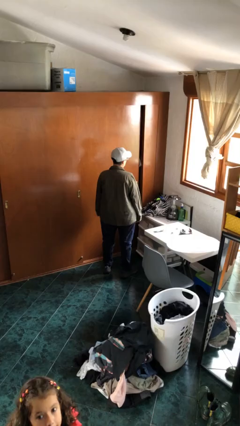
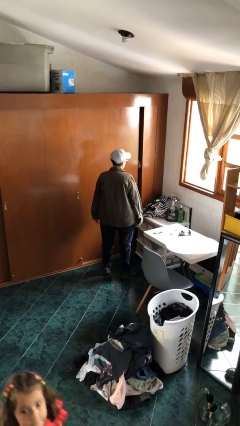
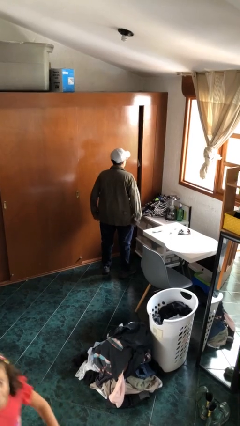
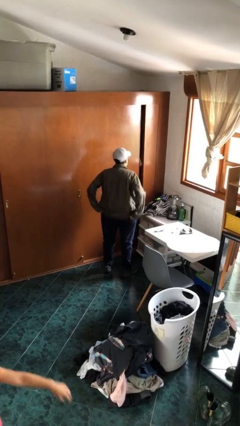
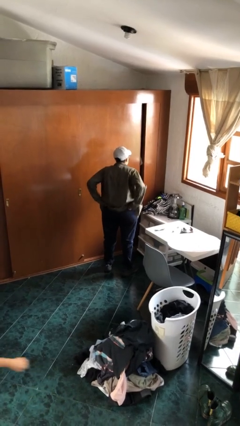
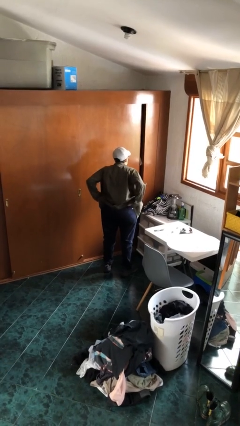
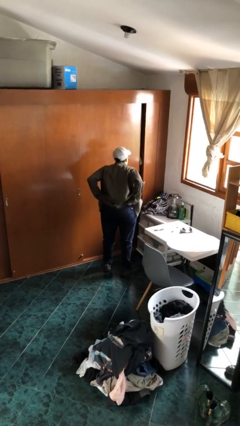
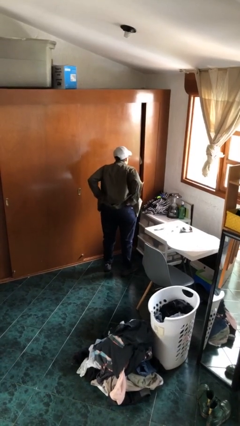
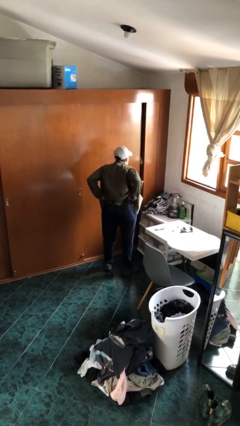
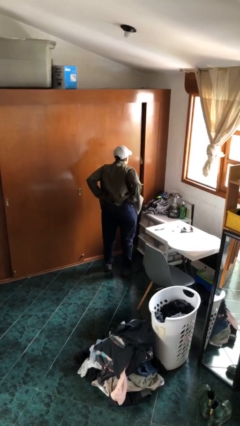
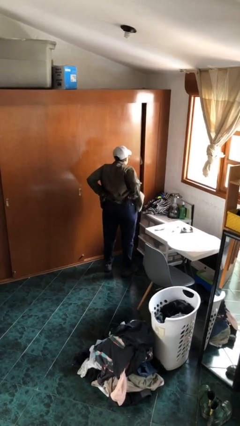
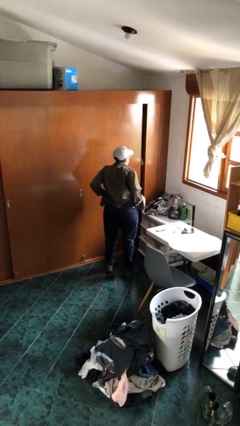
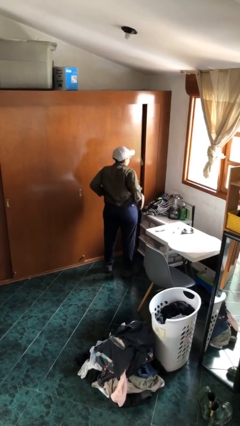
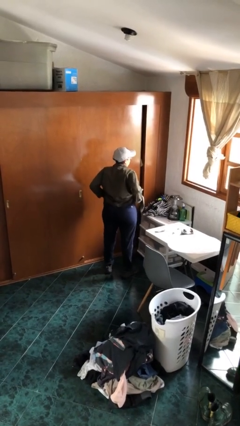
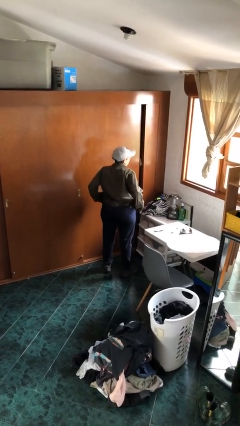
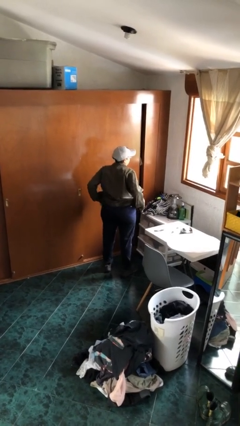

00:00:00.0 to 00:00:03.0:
person hikes up pants

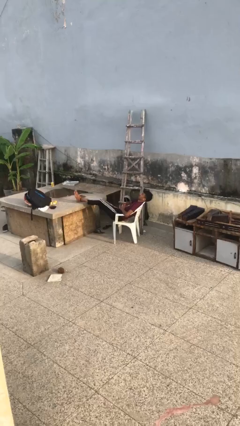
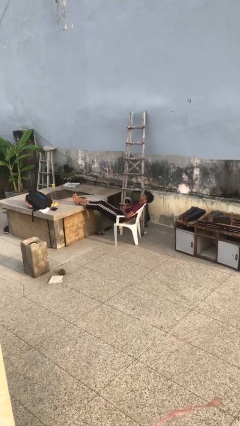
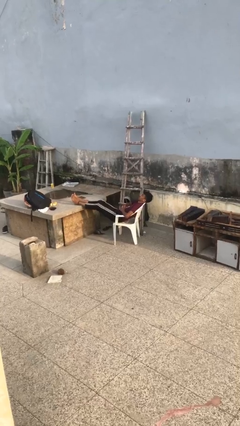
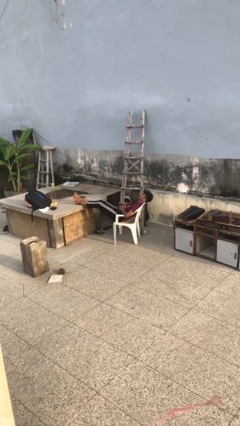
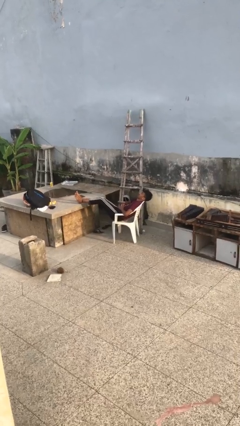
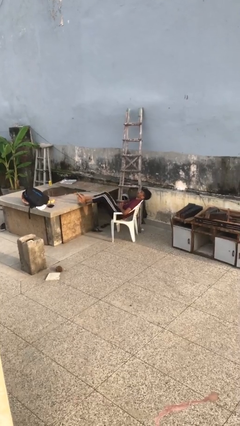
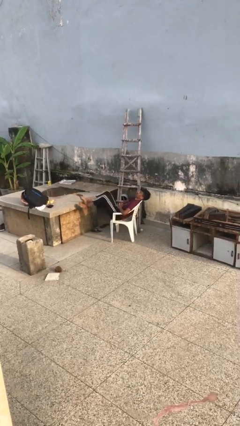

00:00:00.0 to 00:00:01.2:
person puts feet up

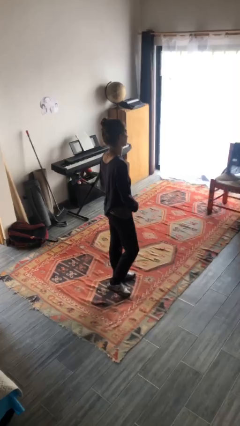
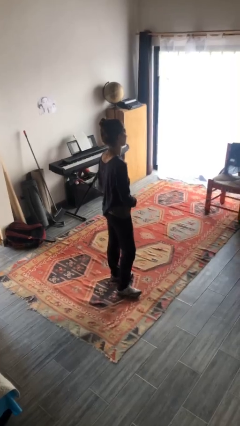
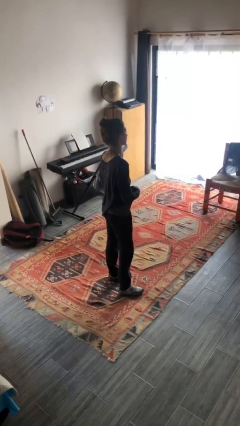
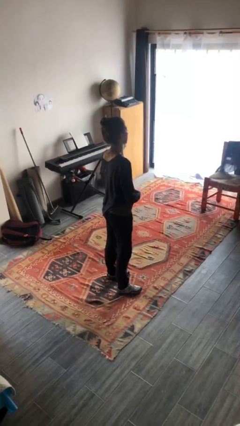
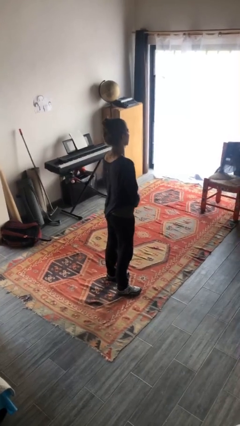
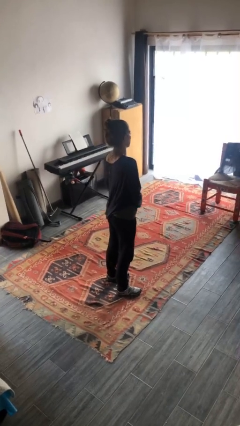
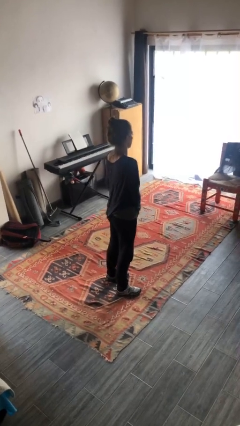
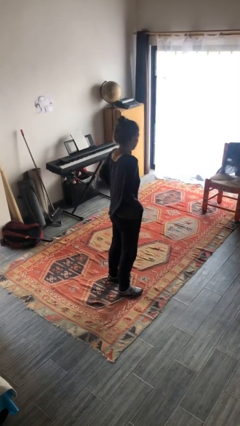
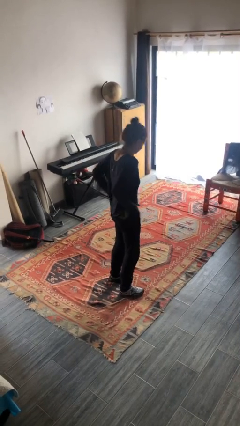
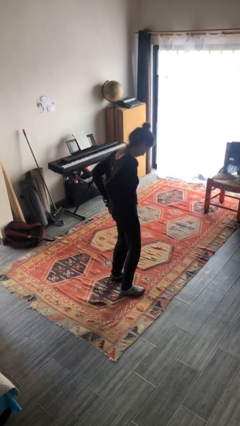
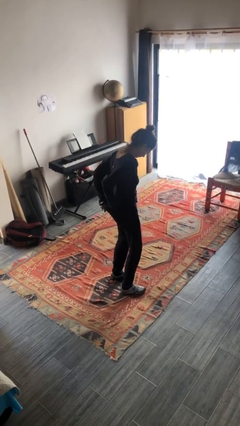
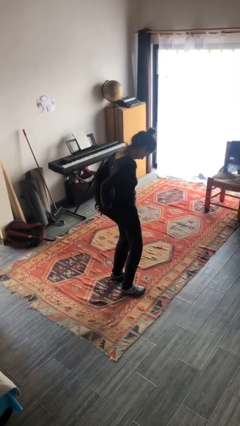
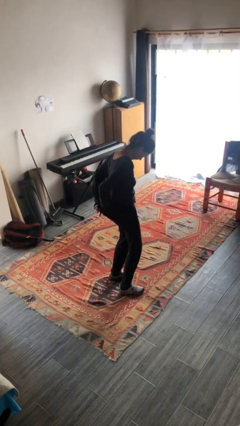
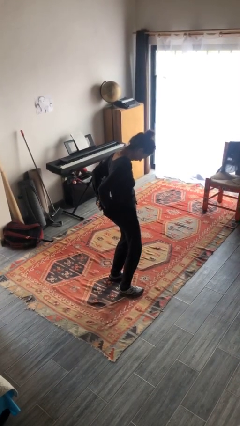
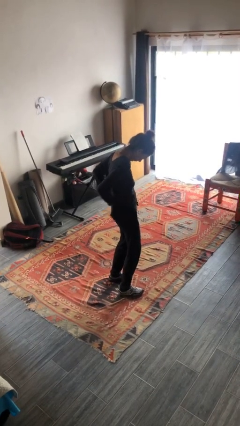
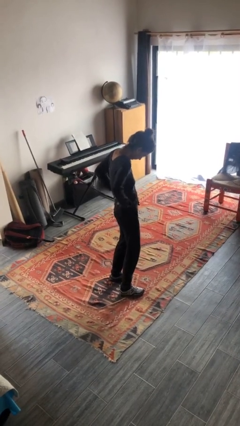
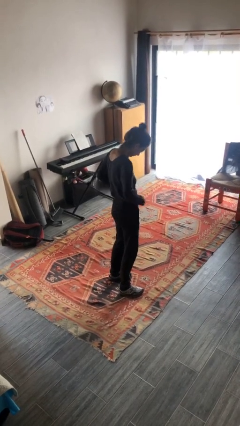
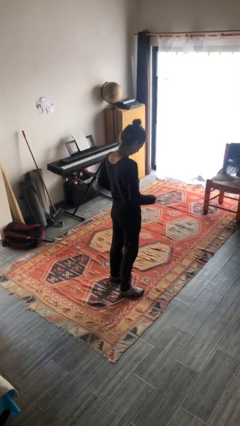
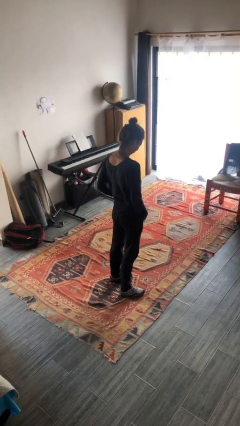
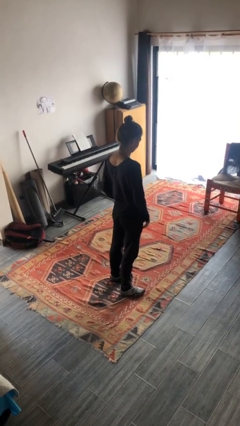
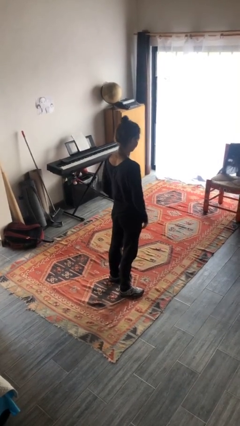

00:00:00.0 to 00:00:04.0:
person tucks in shirt

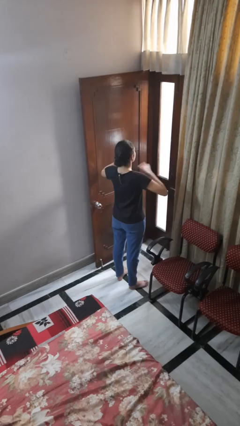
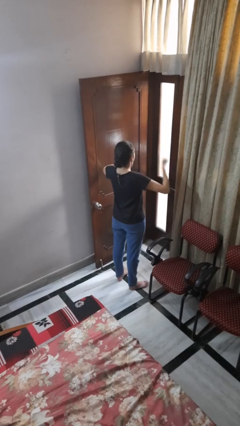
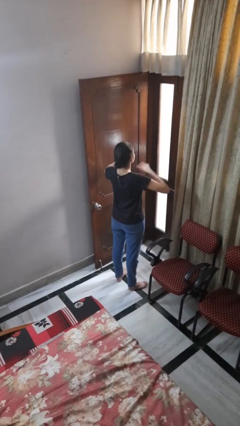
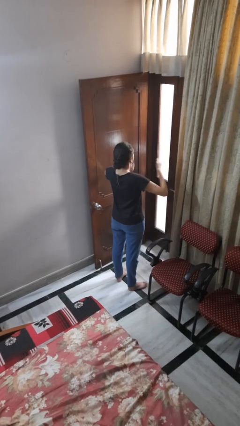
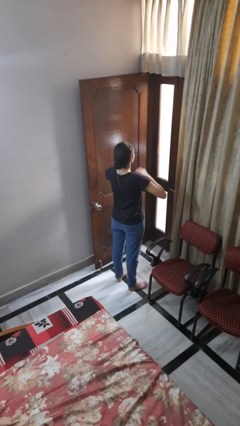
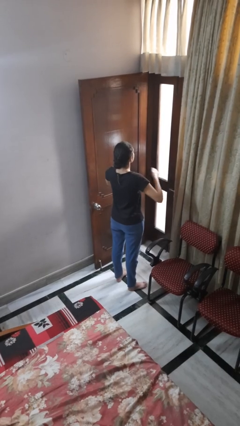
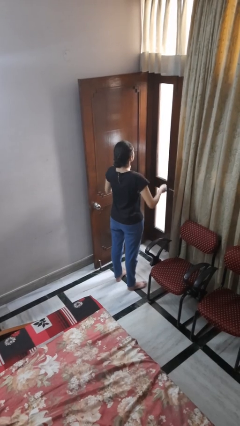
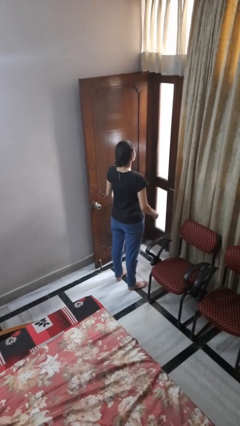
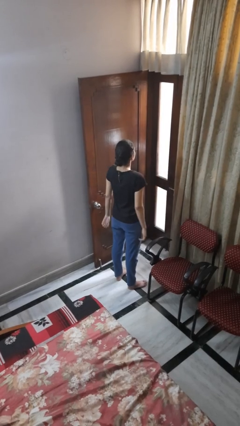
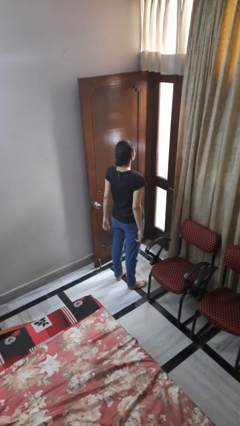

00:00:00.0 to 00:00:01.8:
person drums on chest

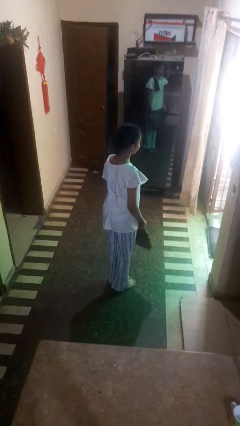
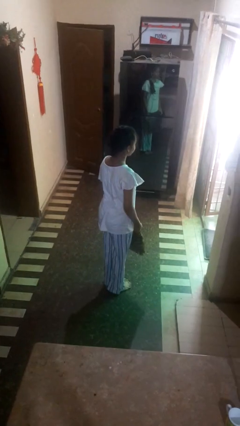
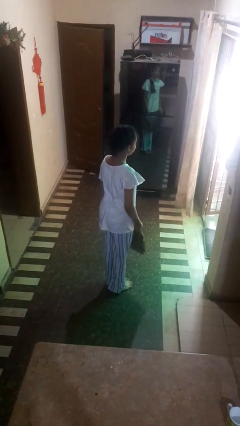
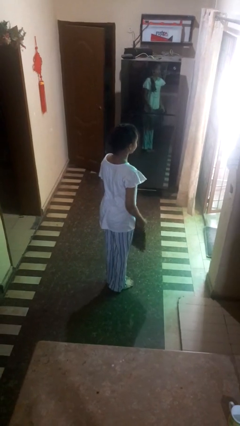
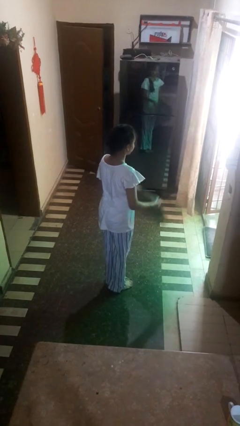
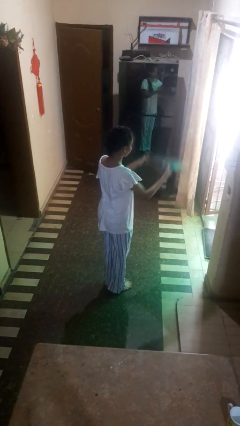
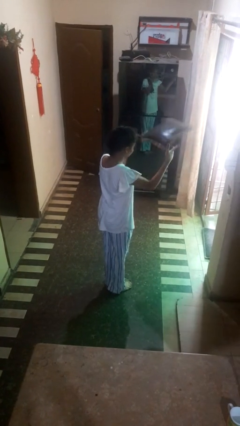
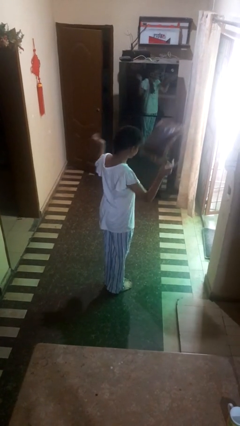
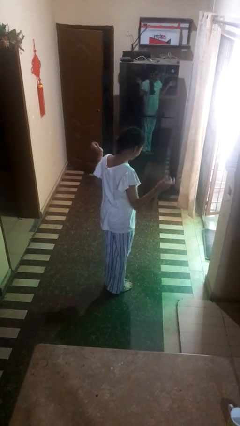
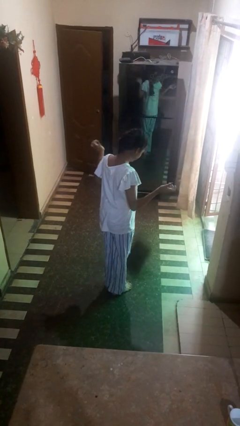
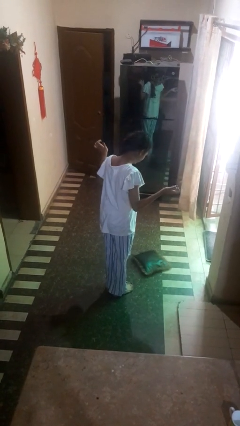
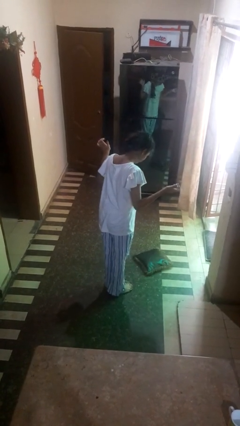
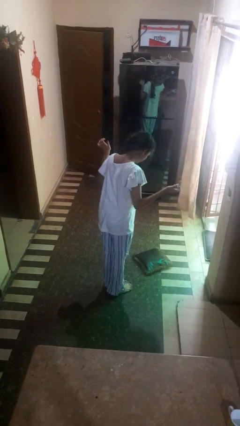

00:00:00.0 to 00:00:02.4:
person throws object into air

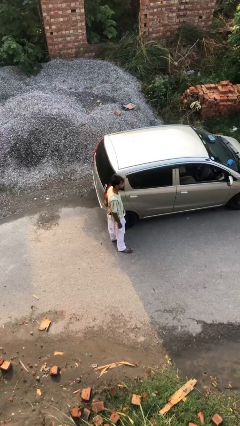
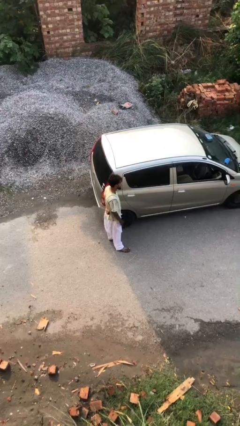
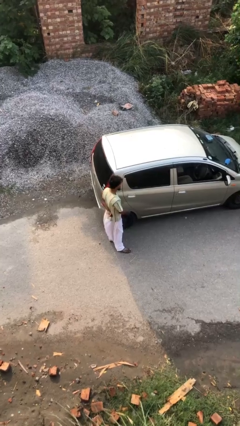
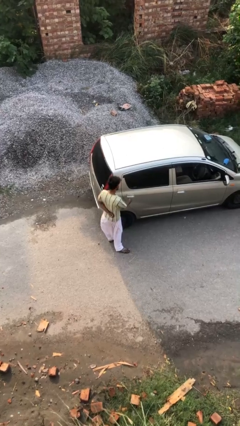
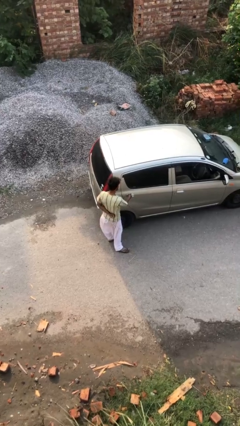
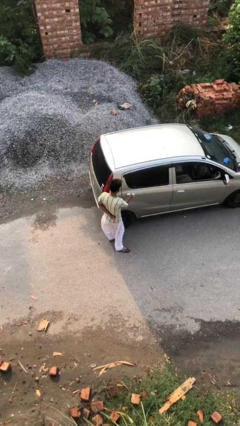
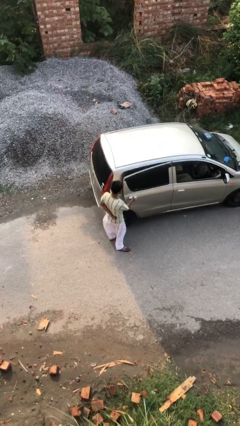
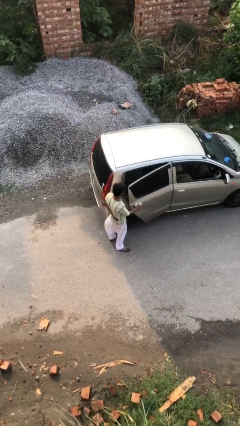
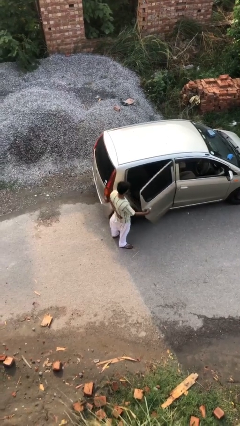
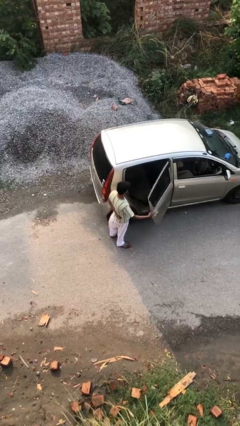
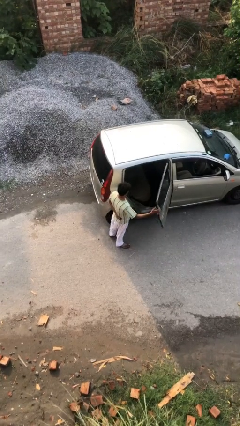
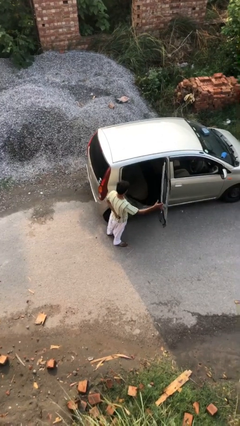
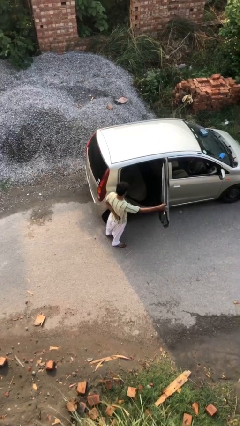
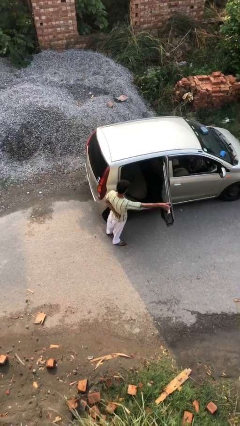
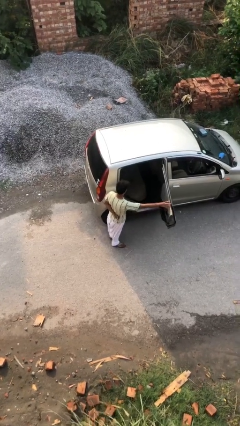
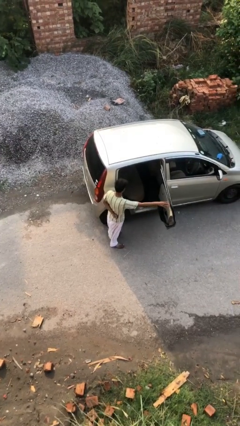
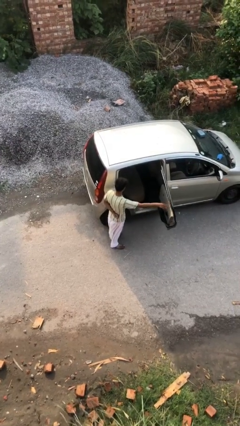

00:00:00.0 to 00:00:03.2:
person opens car door

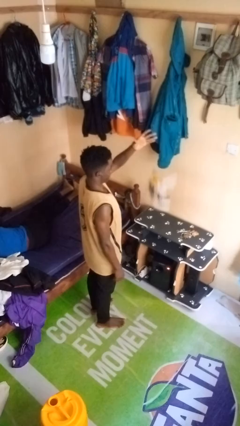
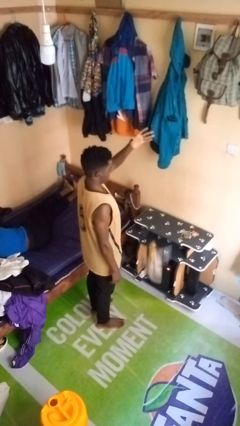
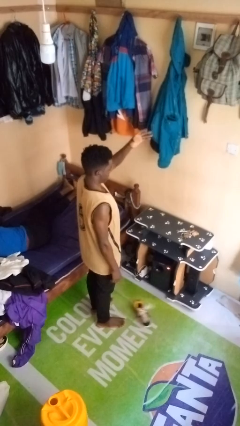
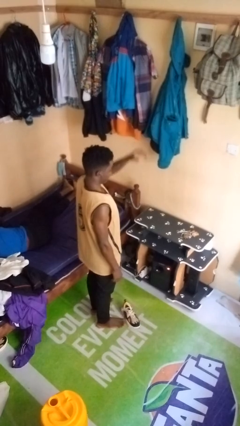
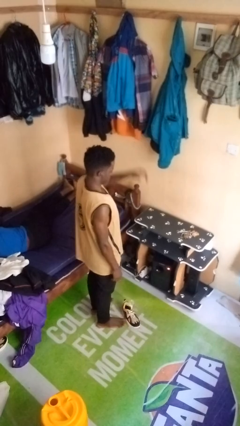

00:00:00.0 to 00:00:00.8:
person drops object

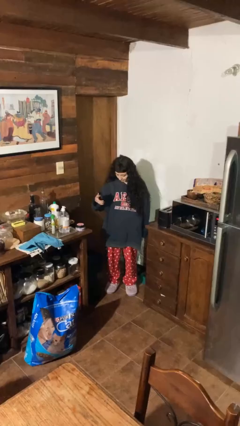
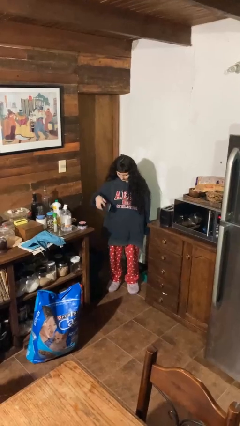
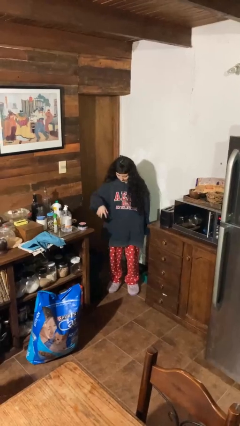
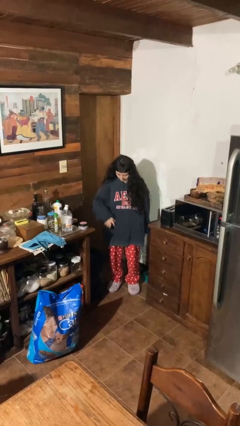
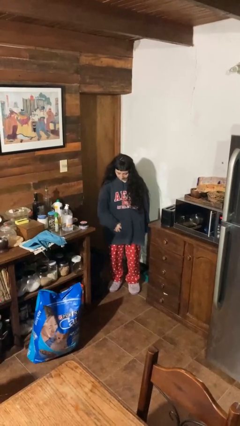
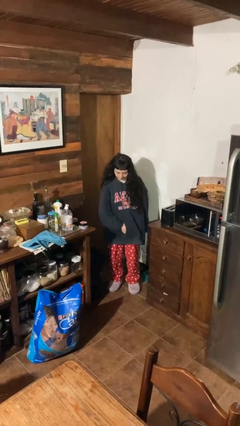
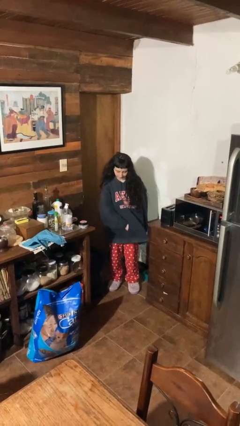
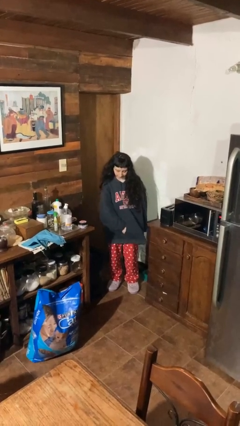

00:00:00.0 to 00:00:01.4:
person puts phone into pocket
